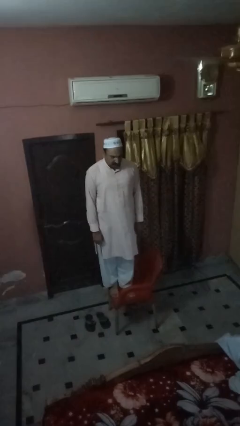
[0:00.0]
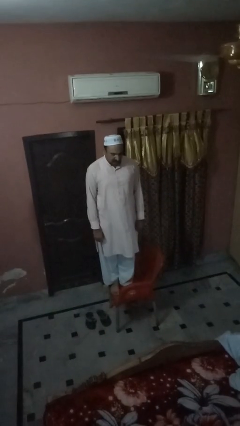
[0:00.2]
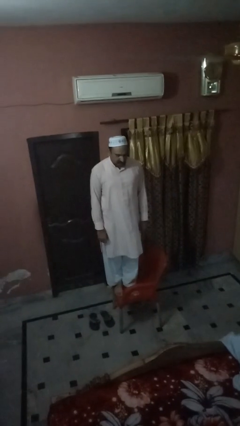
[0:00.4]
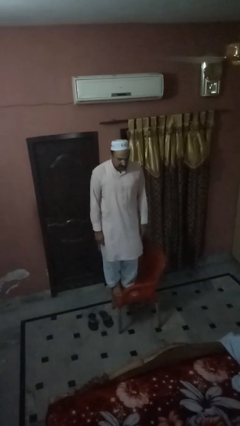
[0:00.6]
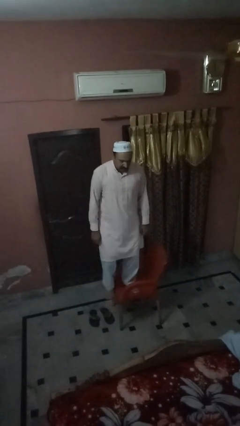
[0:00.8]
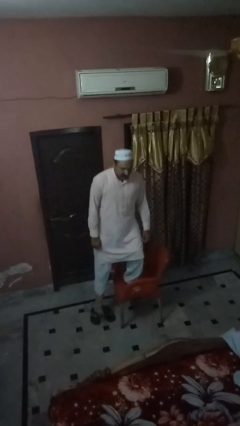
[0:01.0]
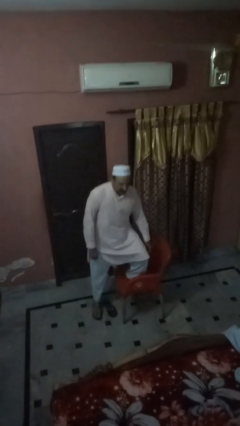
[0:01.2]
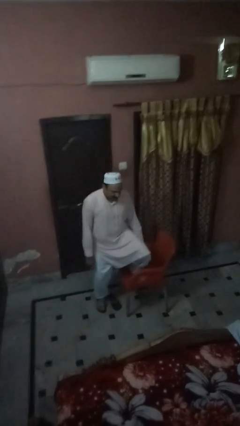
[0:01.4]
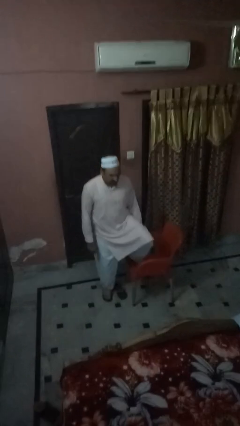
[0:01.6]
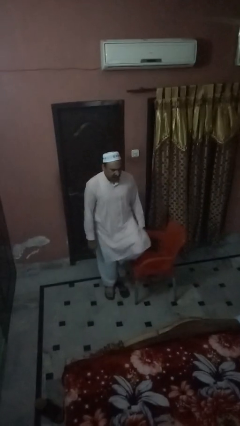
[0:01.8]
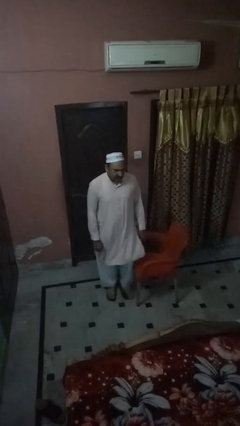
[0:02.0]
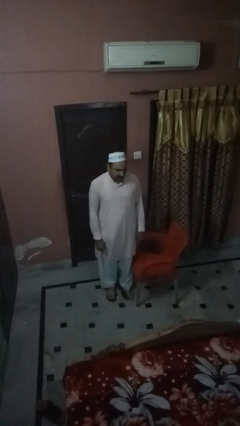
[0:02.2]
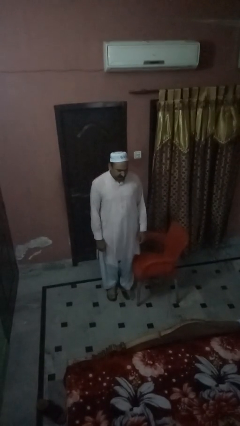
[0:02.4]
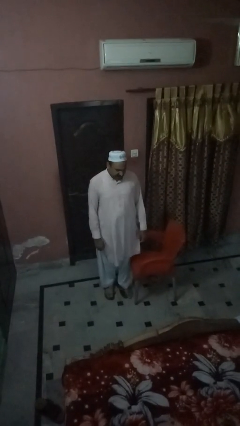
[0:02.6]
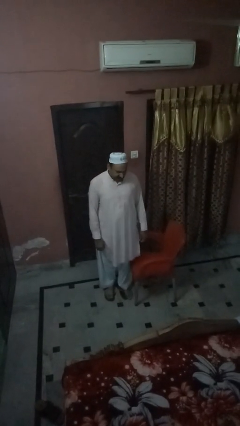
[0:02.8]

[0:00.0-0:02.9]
person climbs off chair

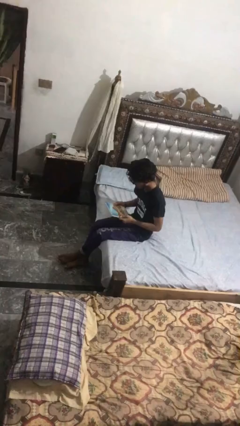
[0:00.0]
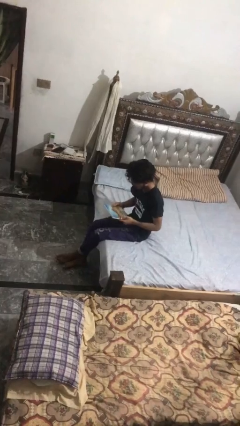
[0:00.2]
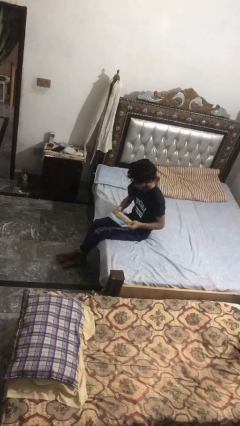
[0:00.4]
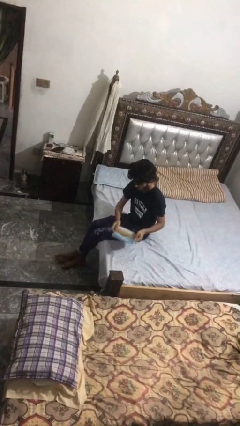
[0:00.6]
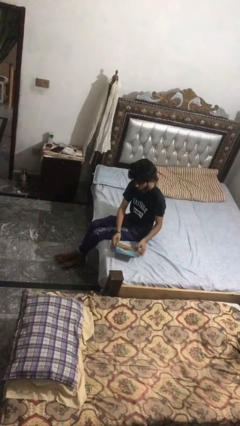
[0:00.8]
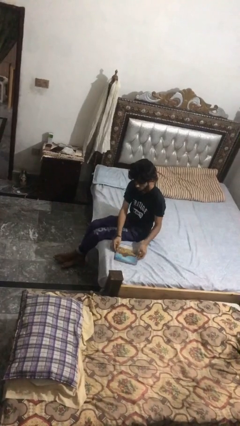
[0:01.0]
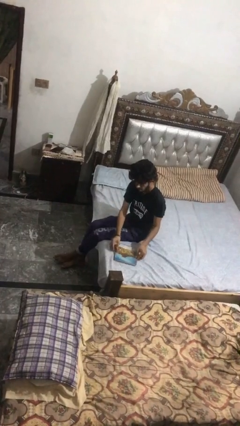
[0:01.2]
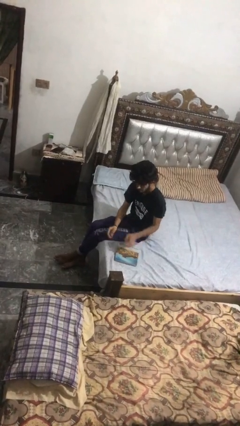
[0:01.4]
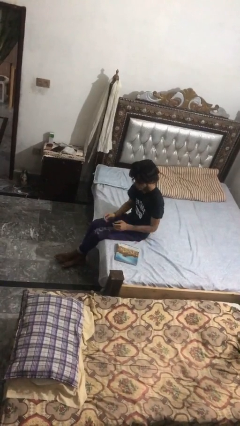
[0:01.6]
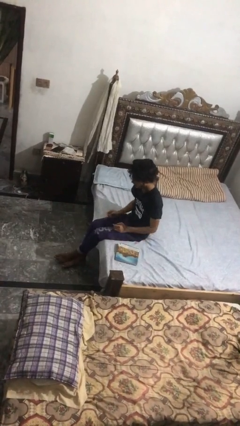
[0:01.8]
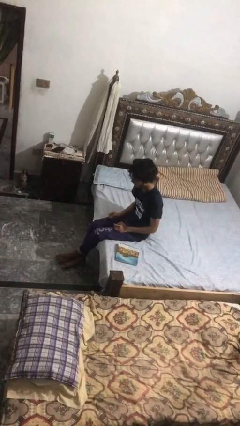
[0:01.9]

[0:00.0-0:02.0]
person puts down object on bed

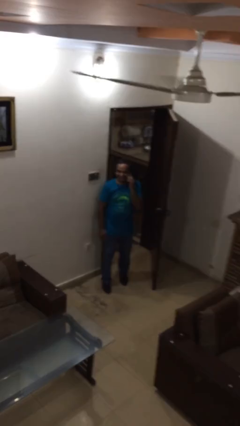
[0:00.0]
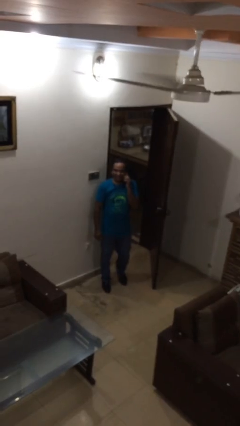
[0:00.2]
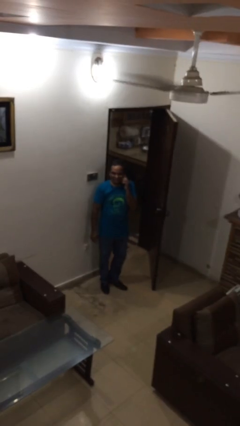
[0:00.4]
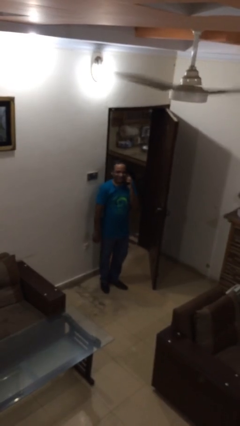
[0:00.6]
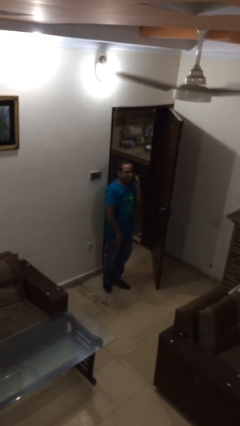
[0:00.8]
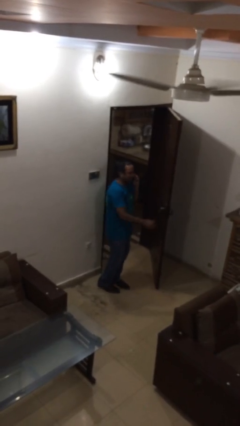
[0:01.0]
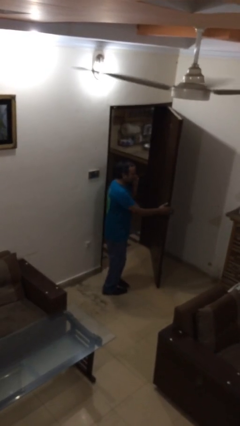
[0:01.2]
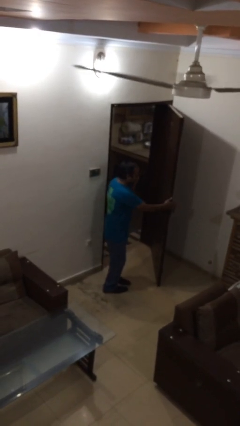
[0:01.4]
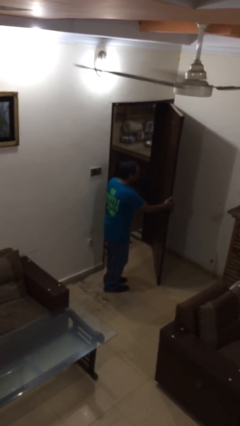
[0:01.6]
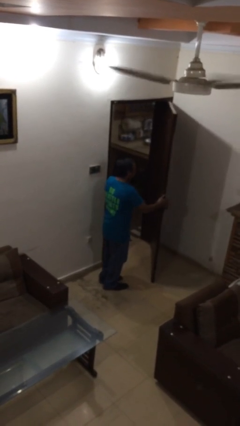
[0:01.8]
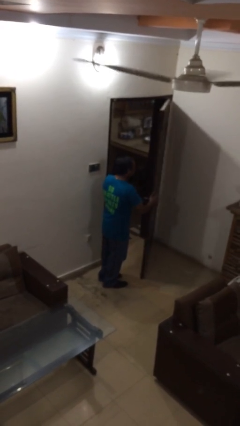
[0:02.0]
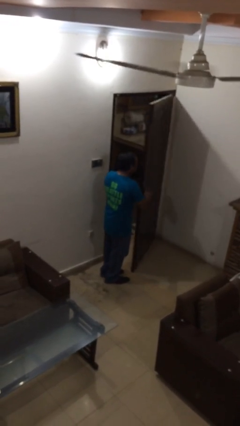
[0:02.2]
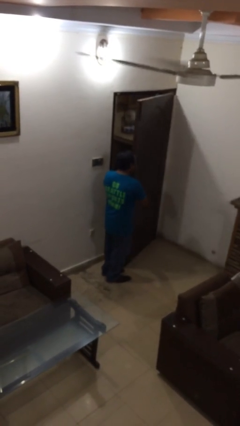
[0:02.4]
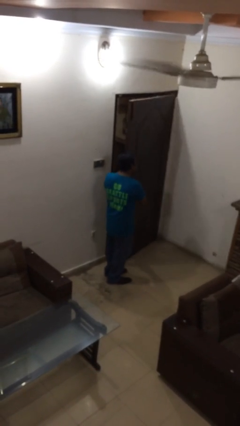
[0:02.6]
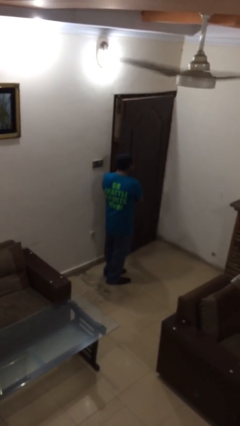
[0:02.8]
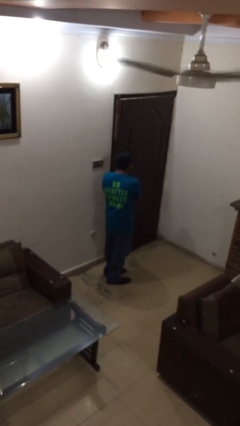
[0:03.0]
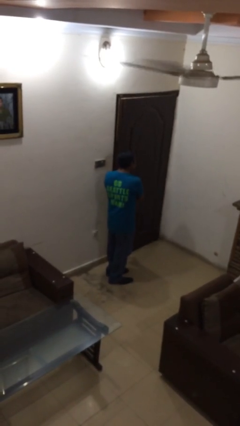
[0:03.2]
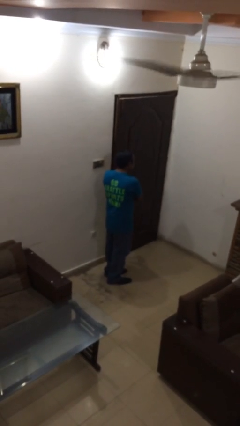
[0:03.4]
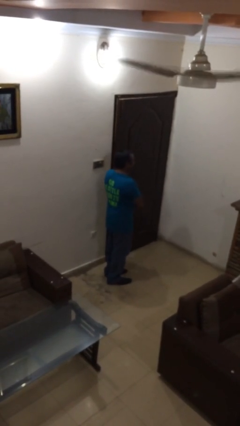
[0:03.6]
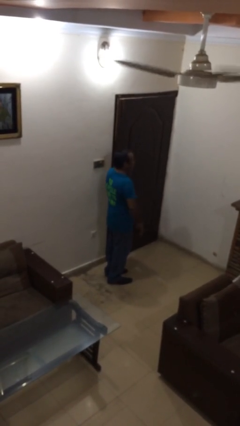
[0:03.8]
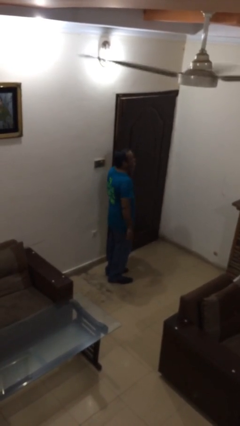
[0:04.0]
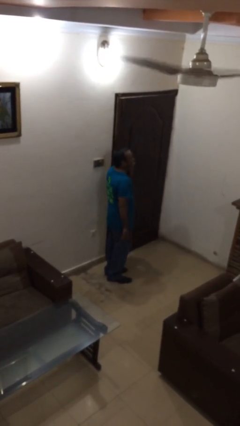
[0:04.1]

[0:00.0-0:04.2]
person closes facility door

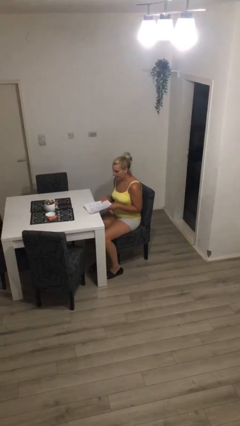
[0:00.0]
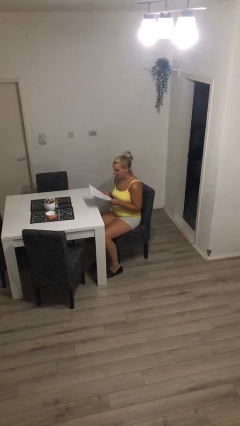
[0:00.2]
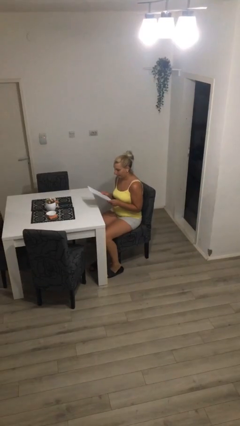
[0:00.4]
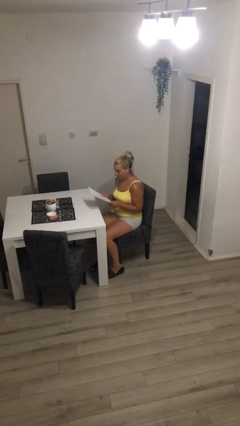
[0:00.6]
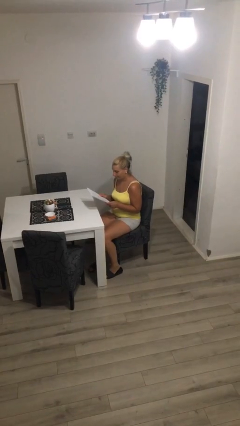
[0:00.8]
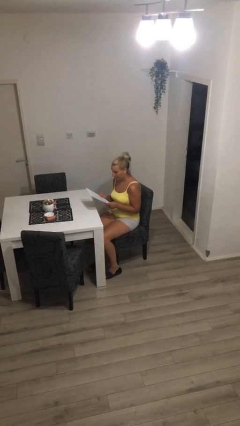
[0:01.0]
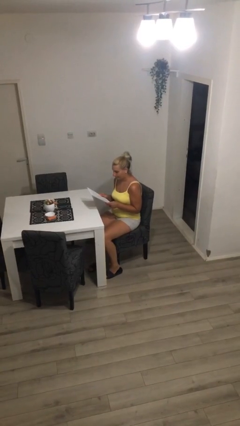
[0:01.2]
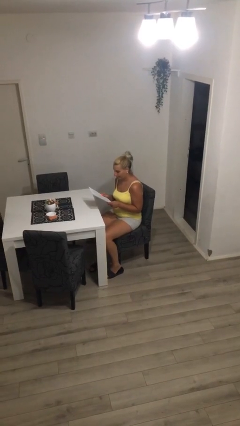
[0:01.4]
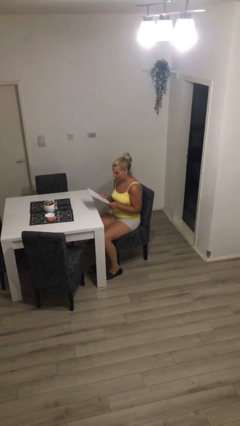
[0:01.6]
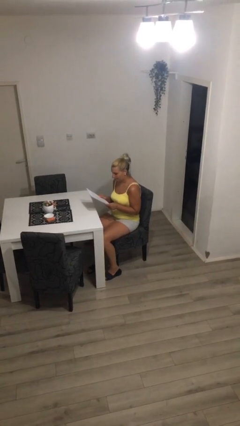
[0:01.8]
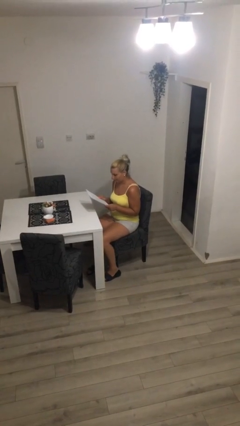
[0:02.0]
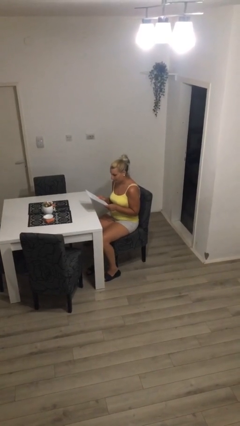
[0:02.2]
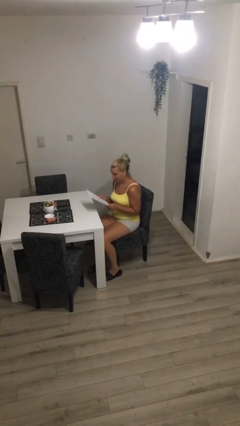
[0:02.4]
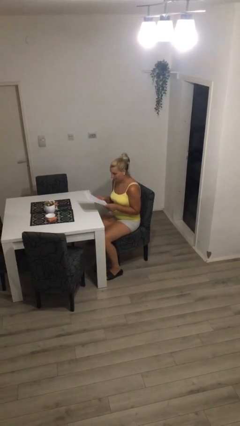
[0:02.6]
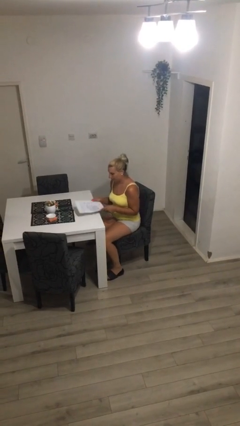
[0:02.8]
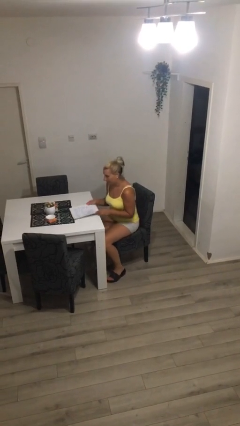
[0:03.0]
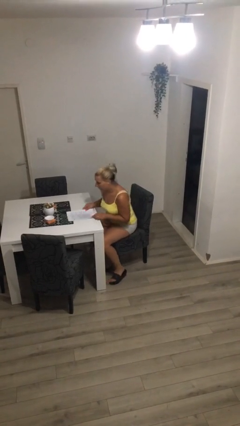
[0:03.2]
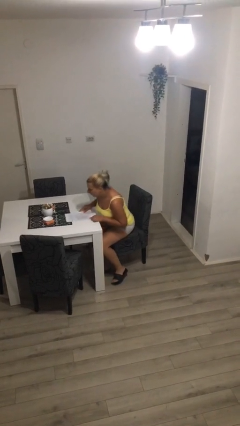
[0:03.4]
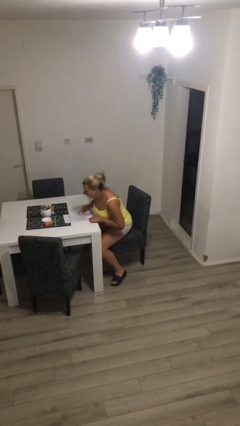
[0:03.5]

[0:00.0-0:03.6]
person reads document

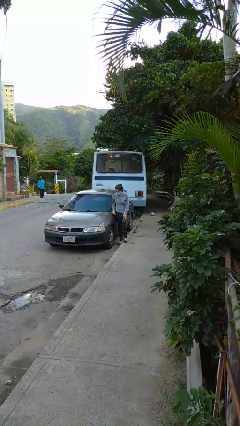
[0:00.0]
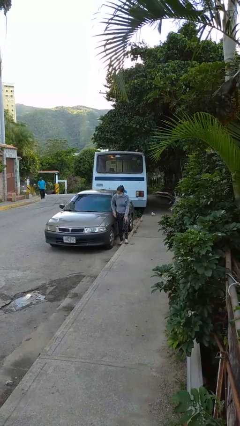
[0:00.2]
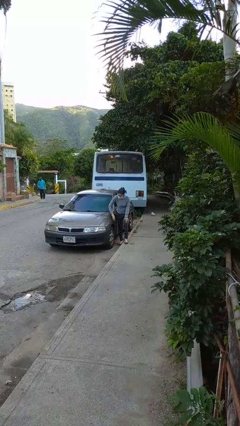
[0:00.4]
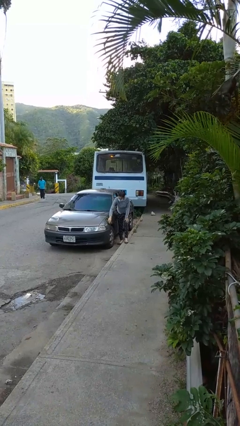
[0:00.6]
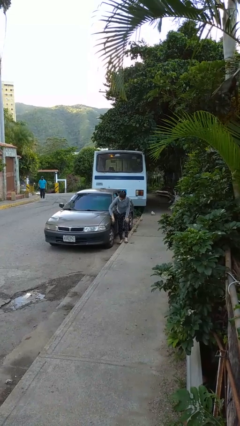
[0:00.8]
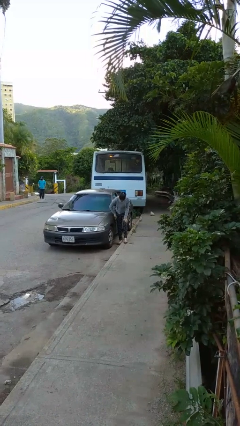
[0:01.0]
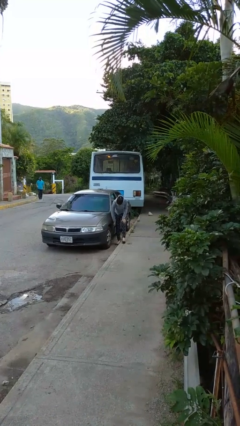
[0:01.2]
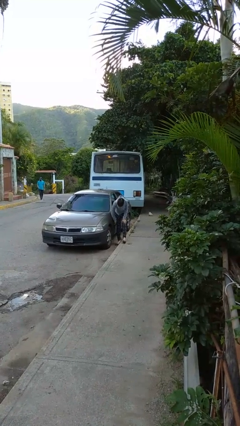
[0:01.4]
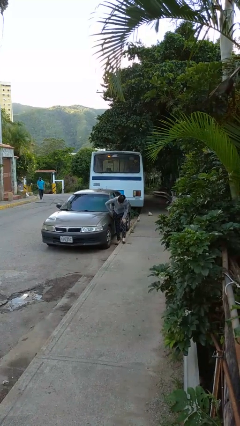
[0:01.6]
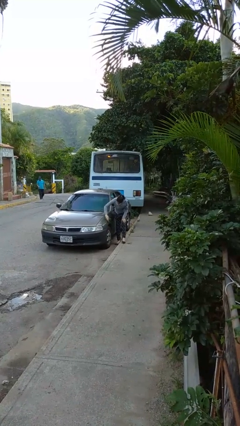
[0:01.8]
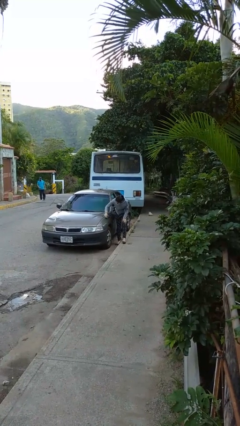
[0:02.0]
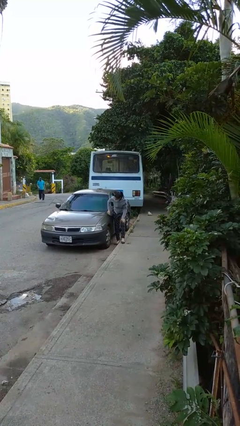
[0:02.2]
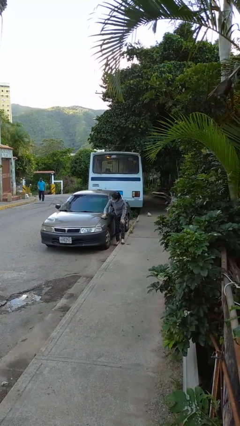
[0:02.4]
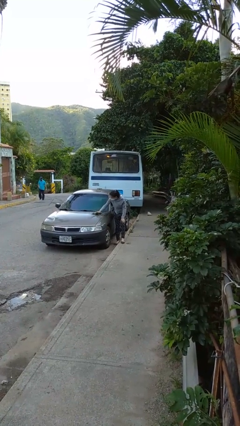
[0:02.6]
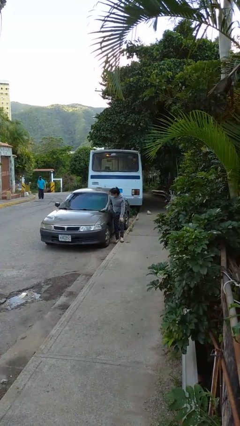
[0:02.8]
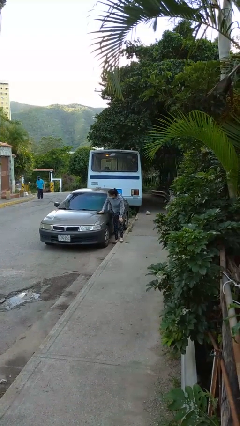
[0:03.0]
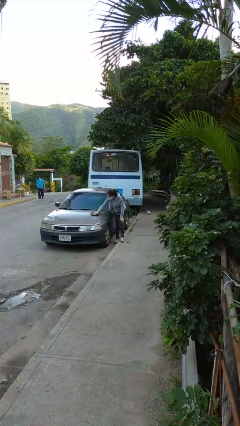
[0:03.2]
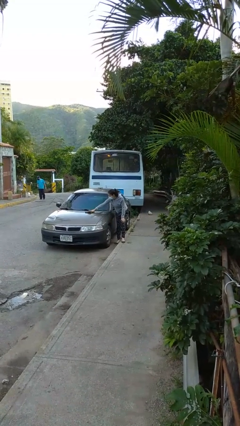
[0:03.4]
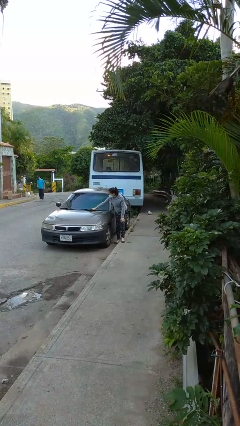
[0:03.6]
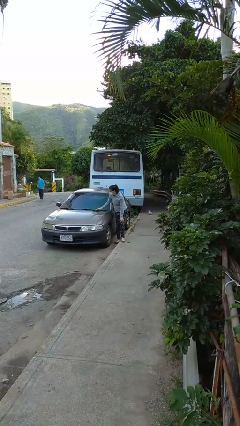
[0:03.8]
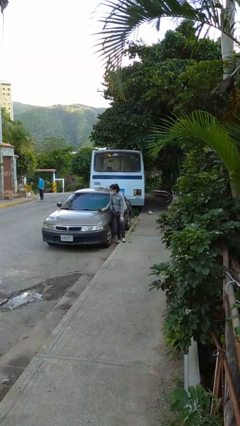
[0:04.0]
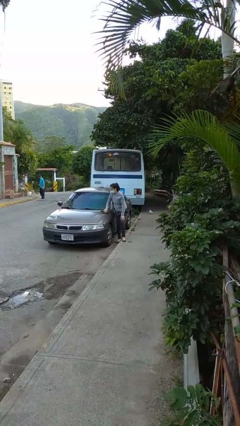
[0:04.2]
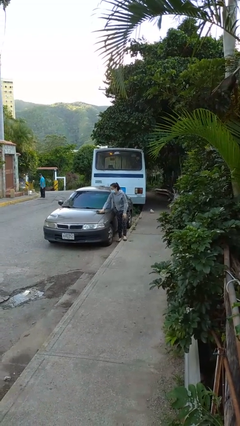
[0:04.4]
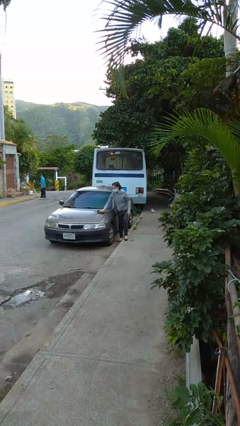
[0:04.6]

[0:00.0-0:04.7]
person polishes car with rag

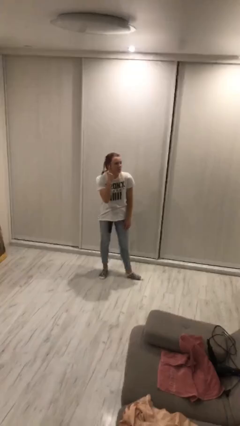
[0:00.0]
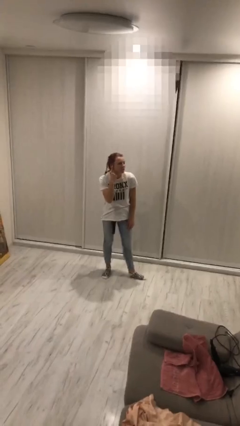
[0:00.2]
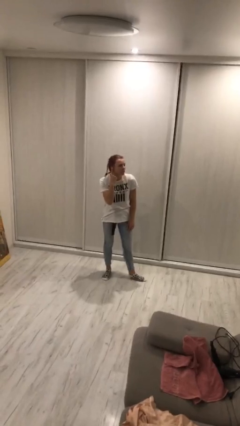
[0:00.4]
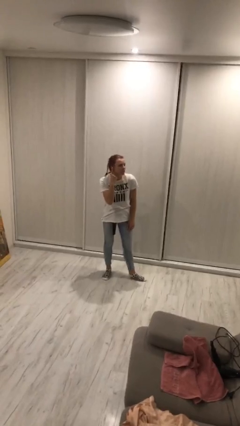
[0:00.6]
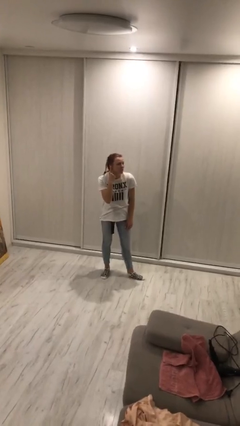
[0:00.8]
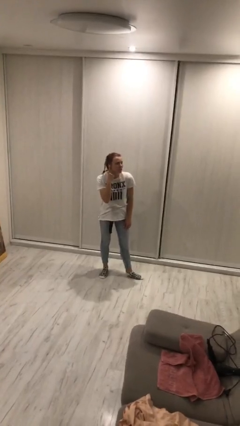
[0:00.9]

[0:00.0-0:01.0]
person gestures listen closely
